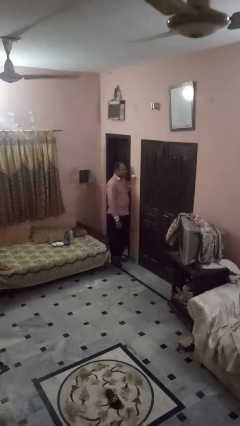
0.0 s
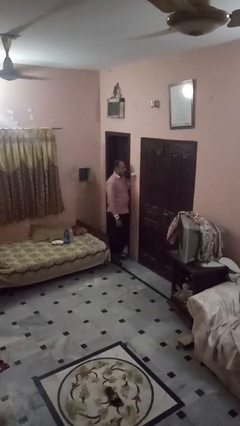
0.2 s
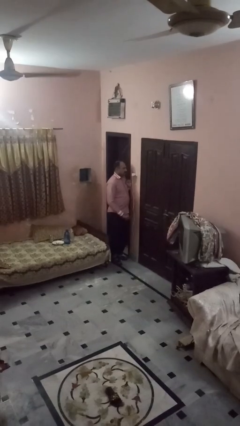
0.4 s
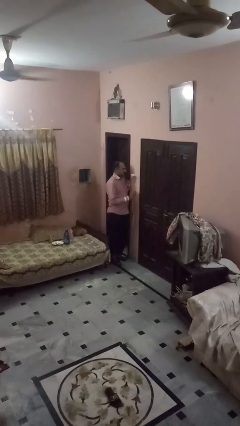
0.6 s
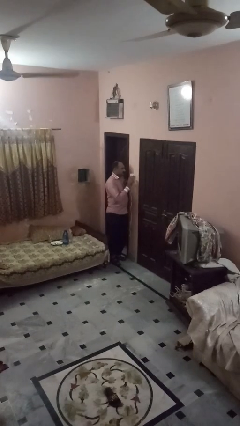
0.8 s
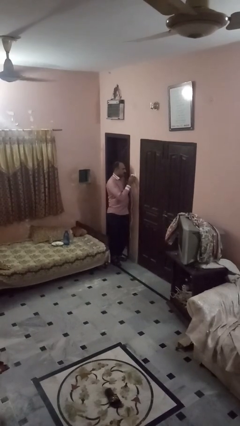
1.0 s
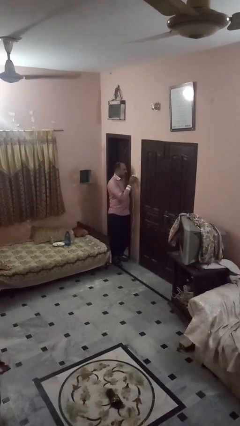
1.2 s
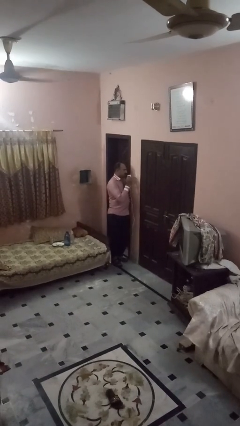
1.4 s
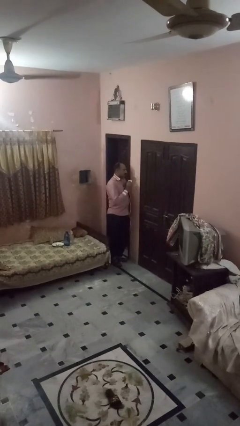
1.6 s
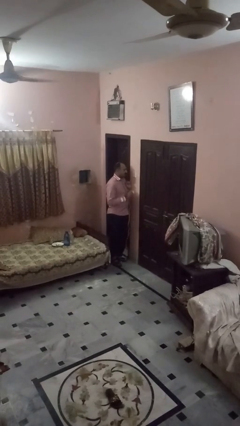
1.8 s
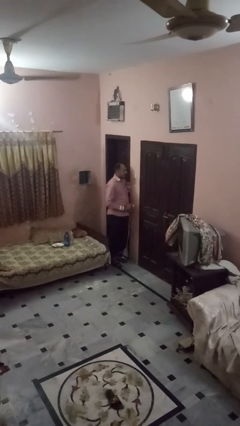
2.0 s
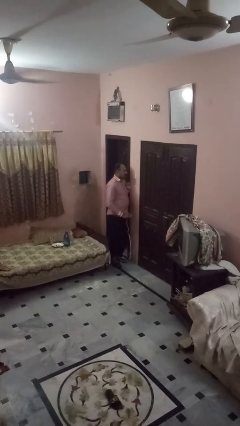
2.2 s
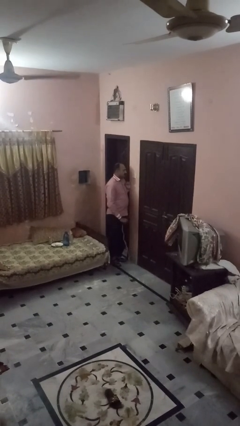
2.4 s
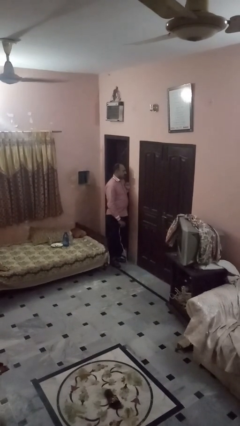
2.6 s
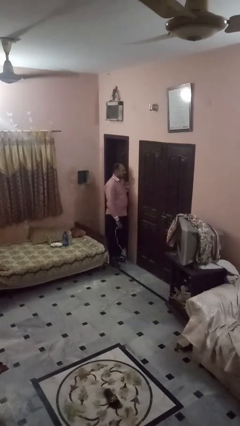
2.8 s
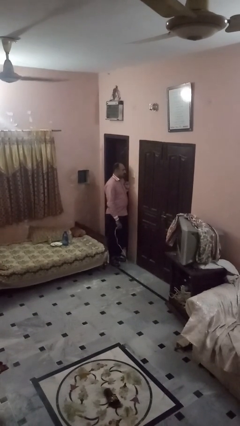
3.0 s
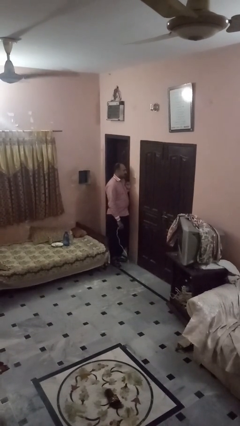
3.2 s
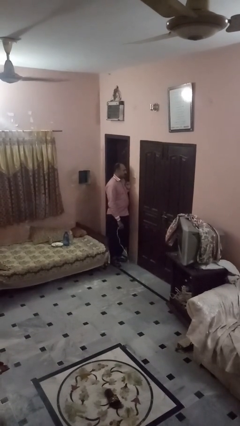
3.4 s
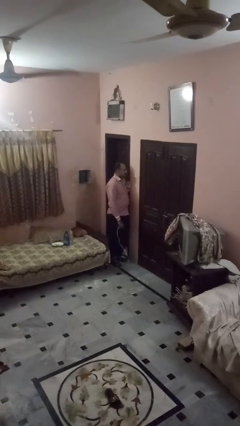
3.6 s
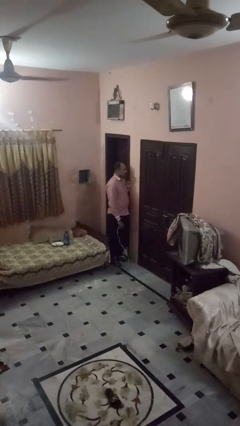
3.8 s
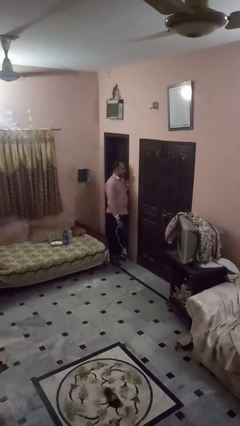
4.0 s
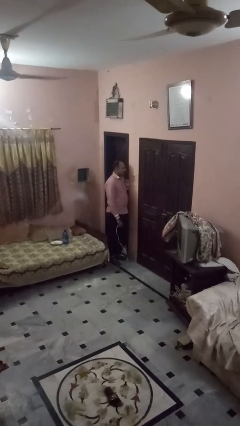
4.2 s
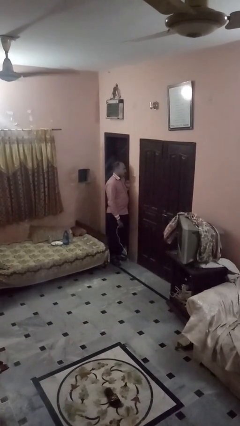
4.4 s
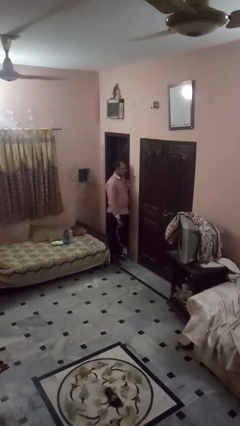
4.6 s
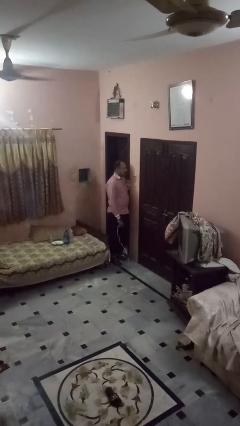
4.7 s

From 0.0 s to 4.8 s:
person unplugs from electrical socket

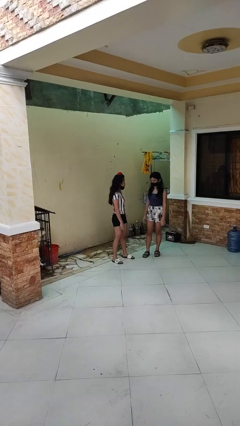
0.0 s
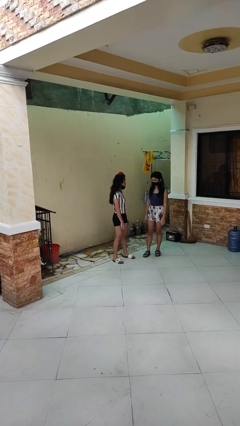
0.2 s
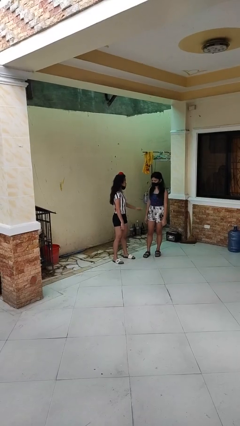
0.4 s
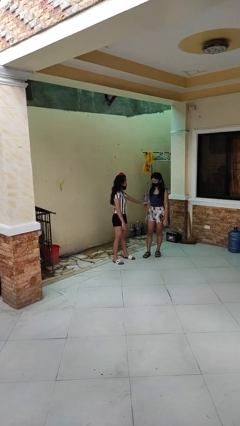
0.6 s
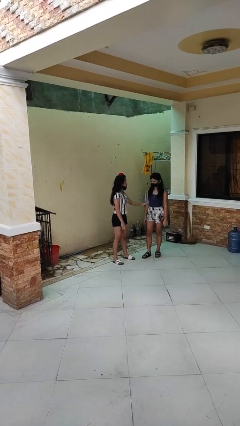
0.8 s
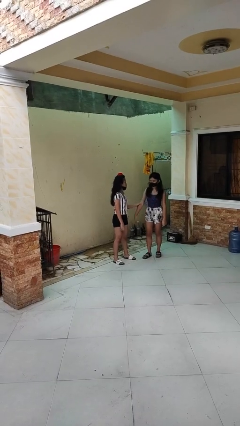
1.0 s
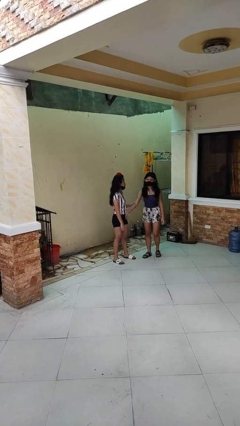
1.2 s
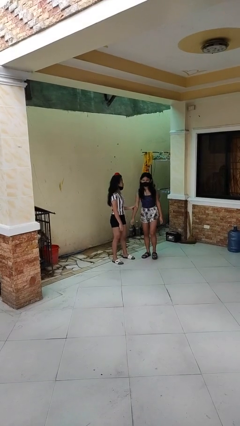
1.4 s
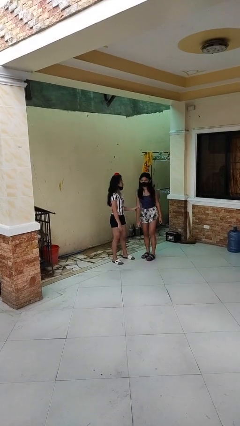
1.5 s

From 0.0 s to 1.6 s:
person grabs person by forearm

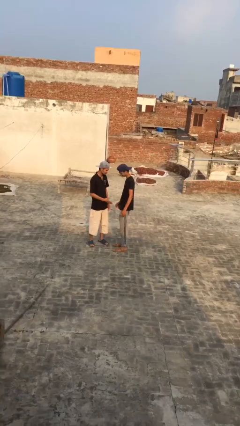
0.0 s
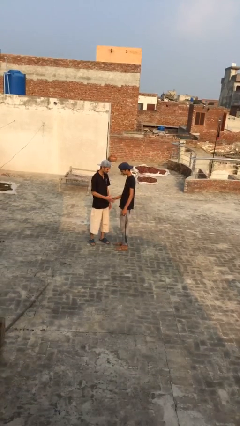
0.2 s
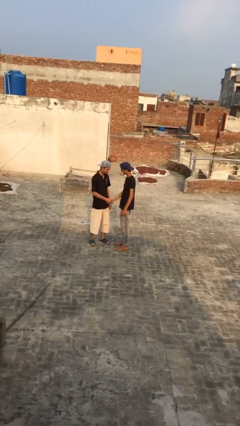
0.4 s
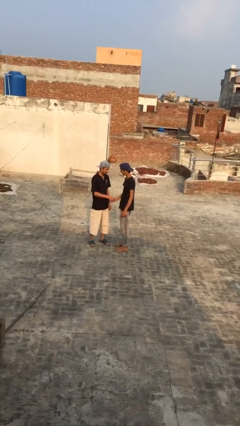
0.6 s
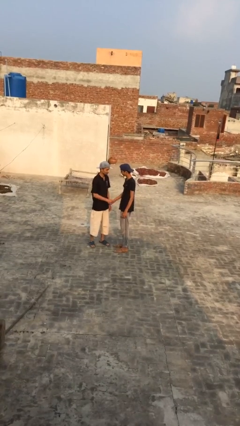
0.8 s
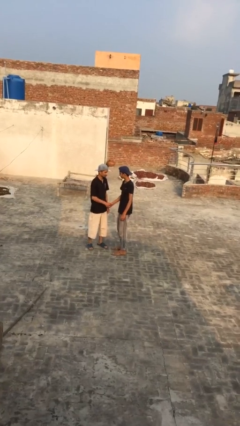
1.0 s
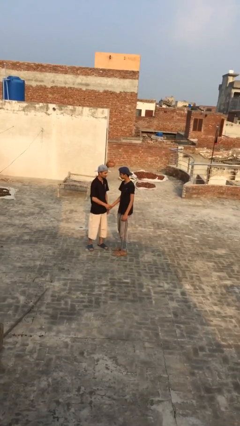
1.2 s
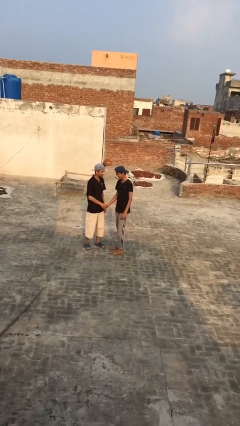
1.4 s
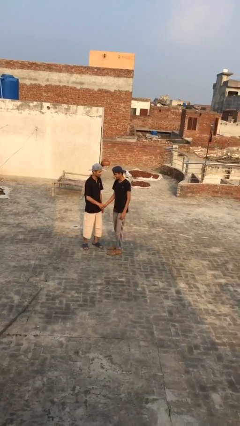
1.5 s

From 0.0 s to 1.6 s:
person shakes hand

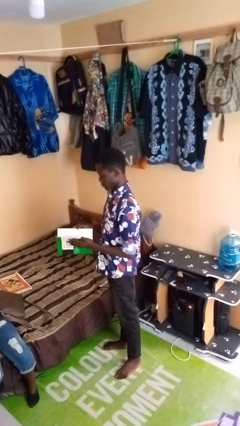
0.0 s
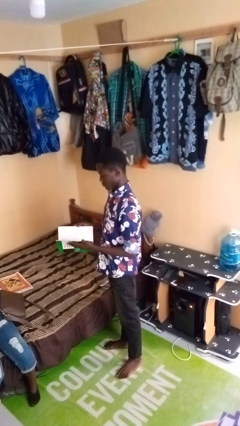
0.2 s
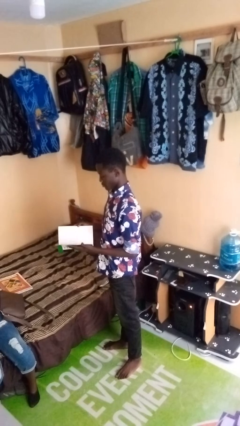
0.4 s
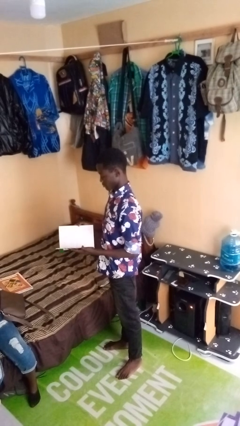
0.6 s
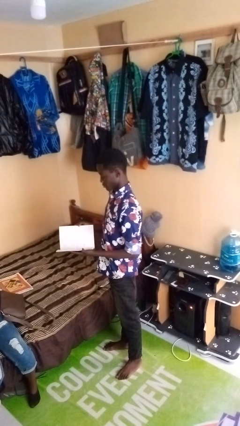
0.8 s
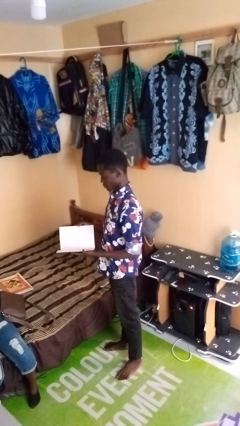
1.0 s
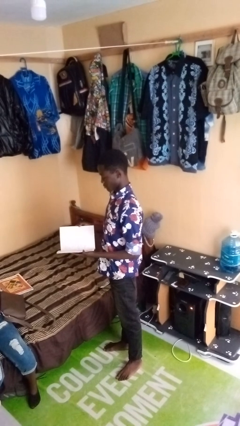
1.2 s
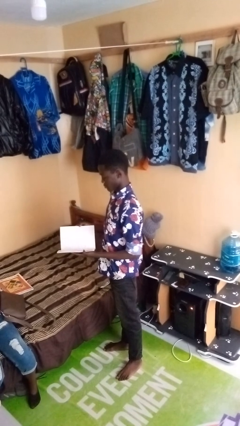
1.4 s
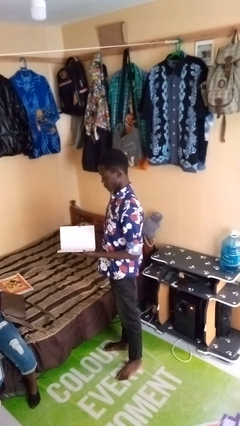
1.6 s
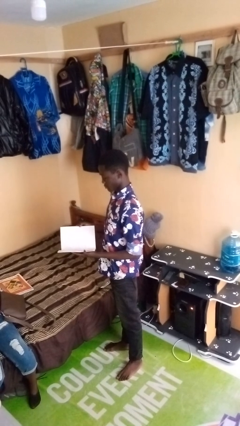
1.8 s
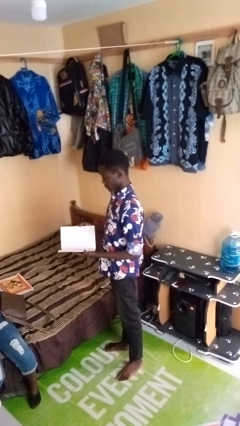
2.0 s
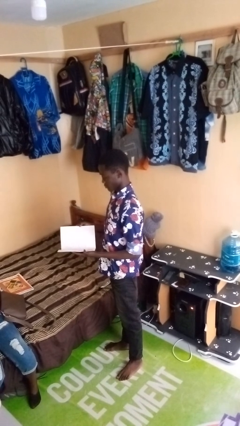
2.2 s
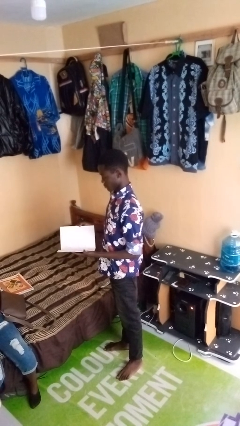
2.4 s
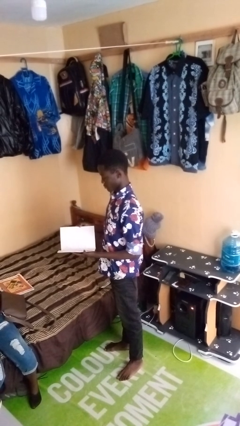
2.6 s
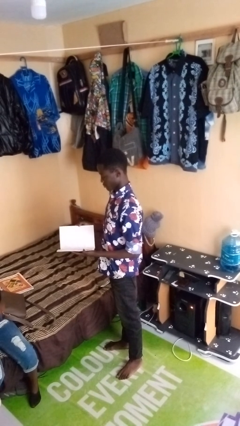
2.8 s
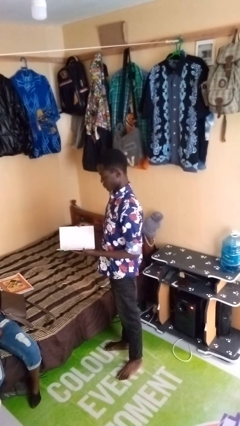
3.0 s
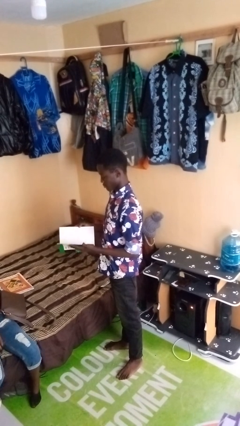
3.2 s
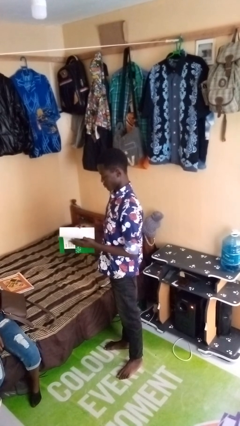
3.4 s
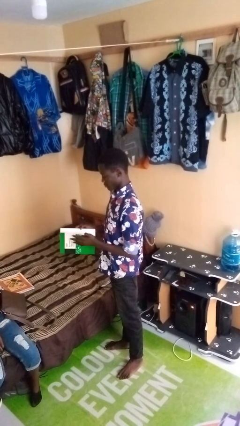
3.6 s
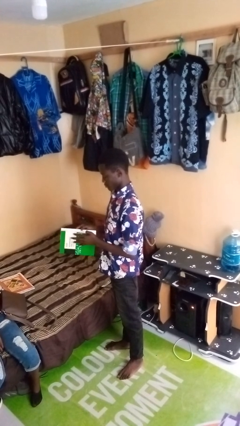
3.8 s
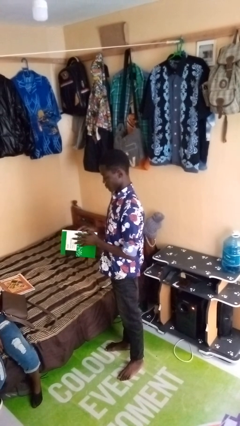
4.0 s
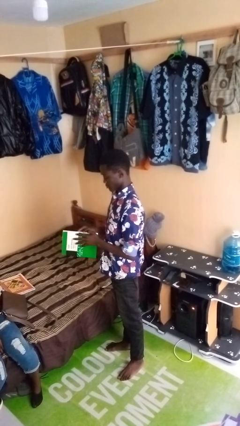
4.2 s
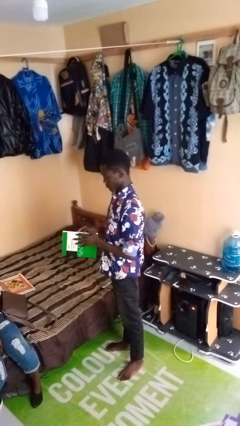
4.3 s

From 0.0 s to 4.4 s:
person reads magazine

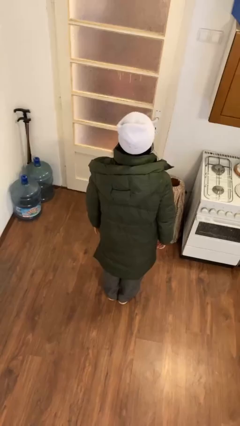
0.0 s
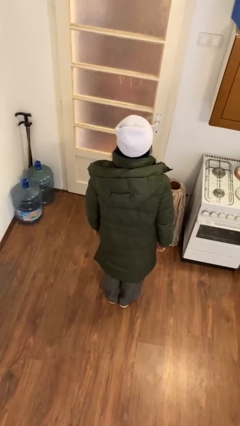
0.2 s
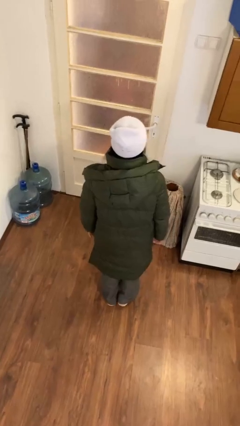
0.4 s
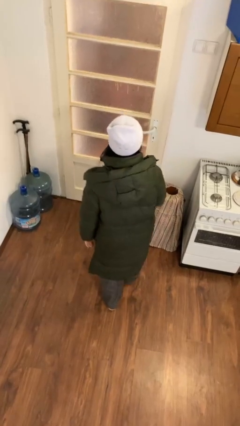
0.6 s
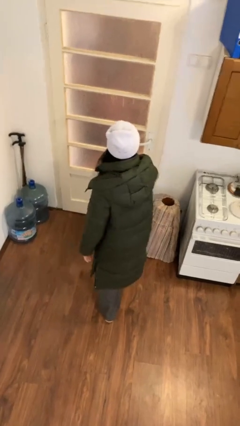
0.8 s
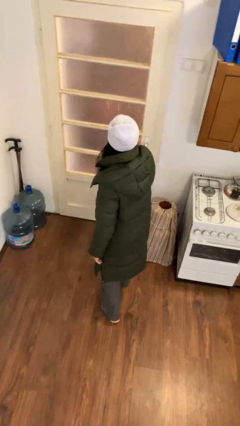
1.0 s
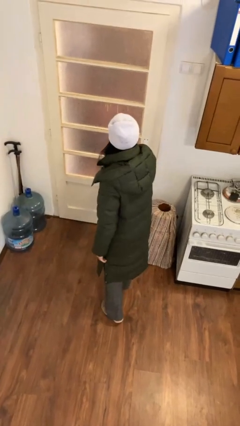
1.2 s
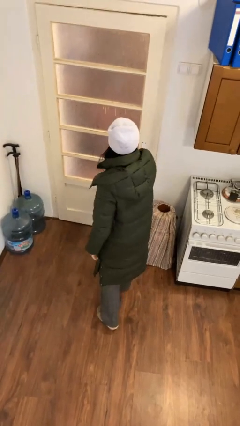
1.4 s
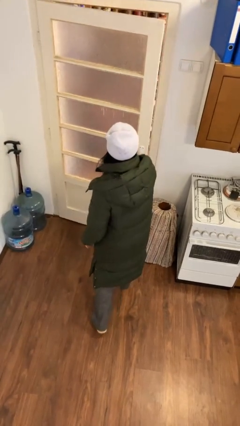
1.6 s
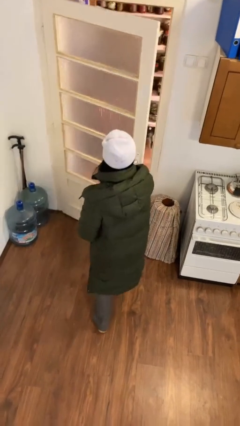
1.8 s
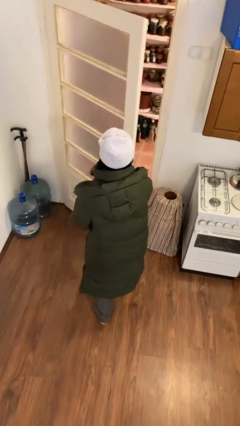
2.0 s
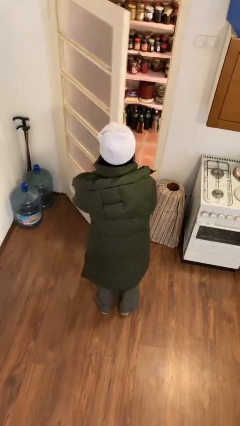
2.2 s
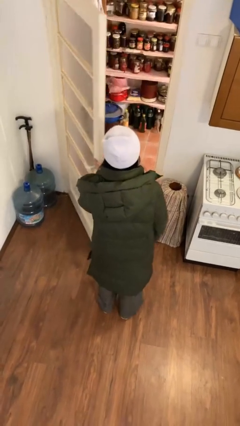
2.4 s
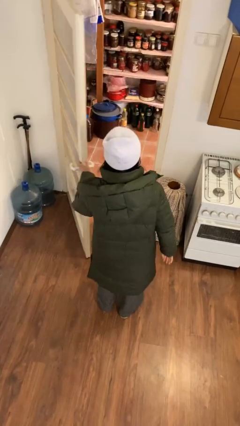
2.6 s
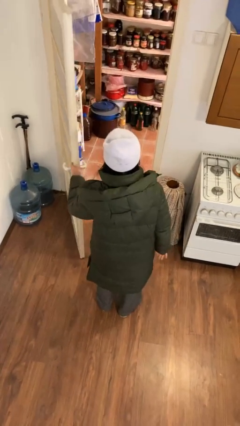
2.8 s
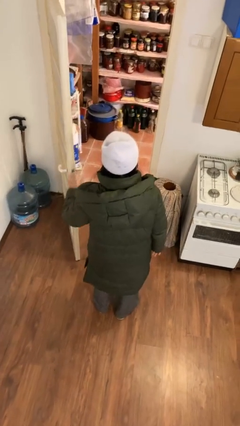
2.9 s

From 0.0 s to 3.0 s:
person opens facility door

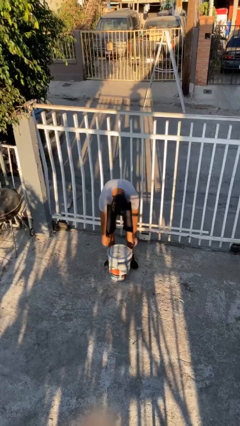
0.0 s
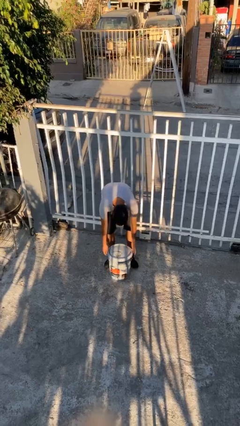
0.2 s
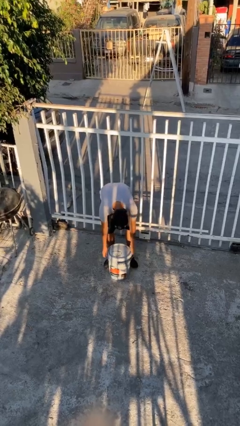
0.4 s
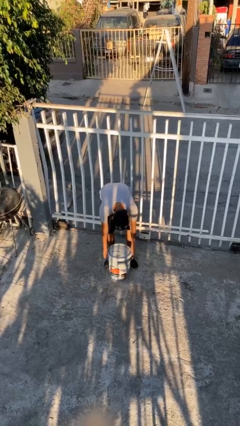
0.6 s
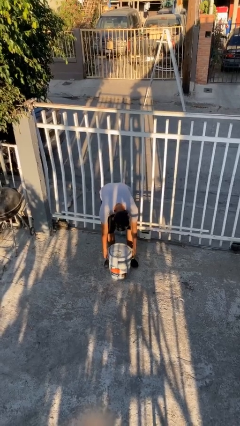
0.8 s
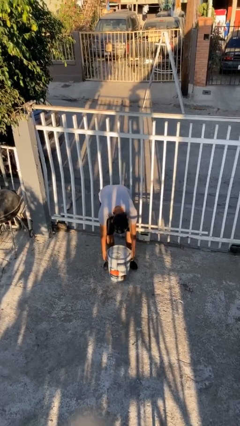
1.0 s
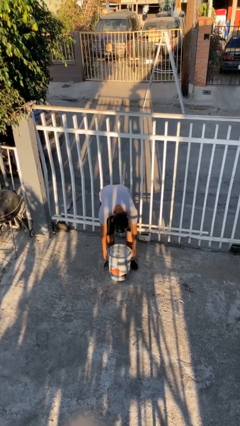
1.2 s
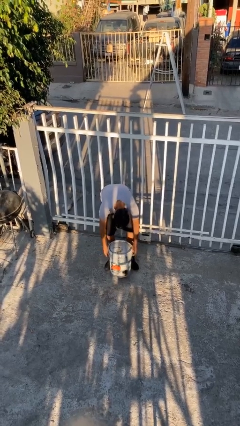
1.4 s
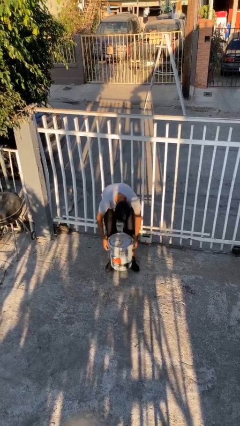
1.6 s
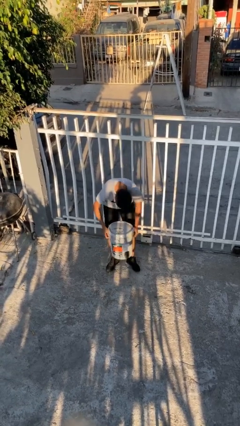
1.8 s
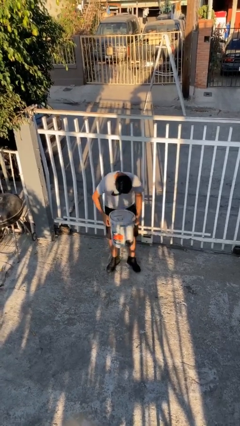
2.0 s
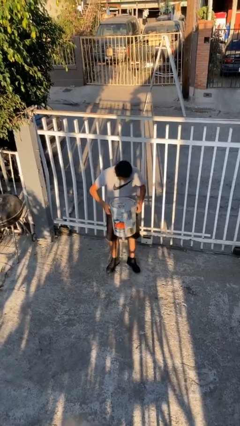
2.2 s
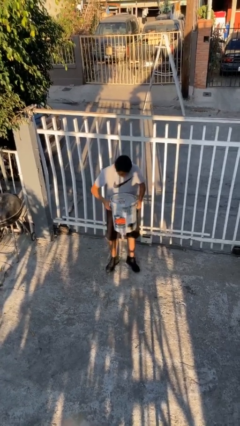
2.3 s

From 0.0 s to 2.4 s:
person picks up object from floor
